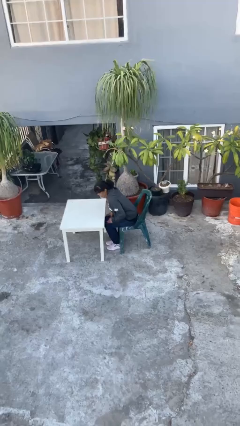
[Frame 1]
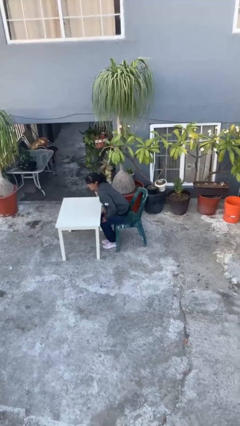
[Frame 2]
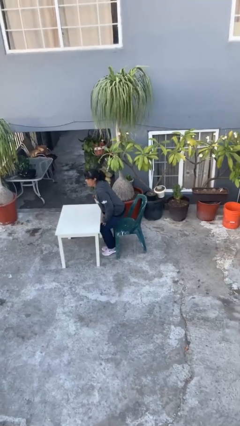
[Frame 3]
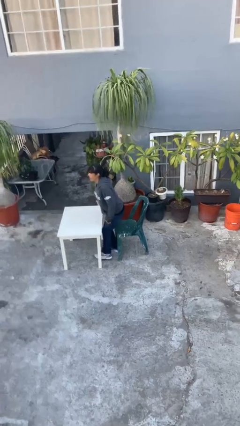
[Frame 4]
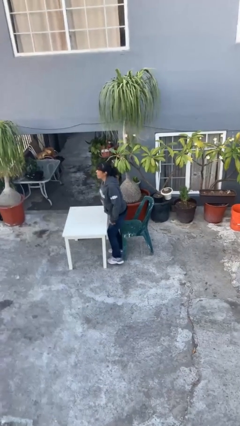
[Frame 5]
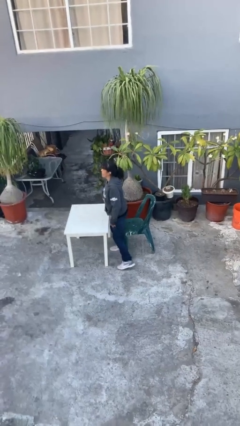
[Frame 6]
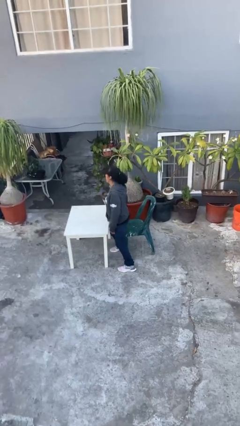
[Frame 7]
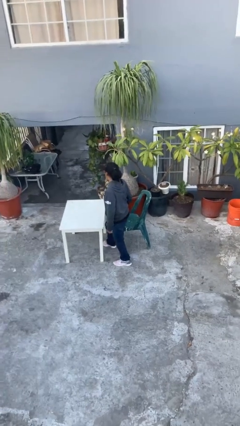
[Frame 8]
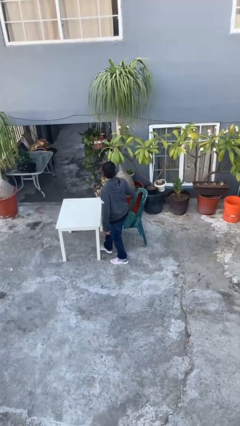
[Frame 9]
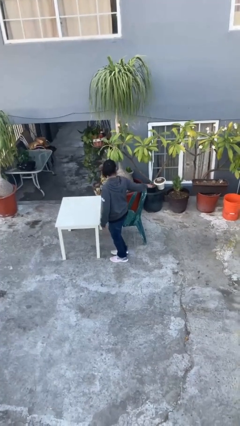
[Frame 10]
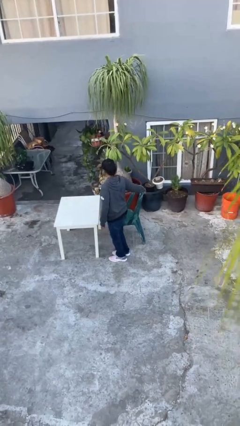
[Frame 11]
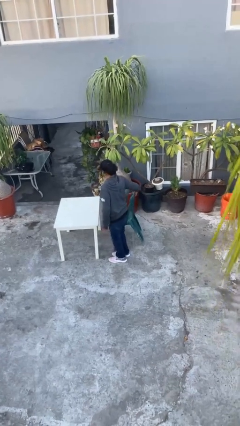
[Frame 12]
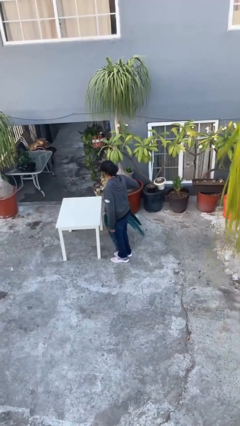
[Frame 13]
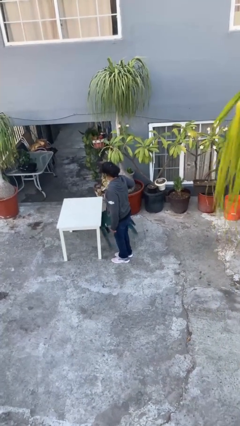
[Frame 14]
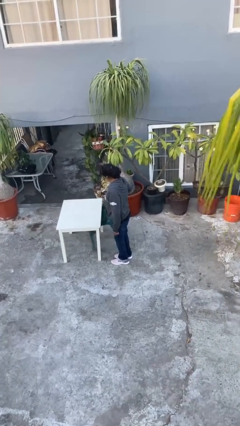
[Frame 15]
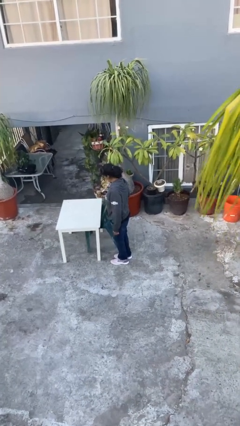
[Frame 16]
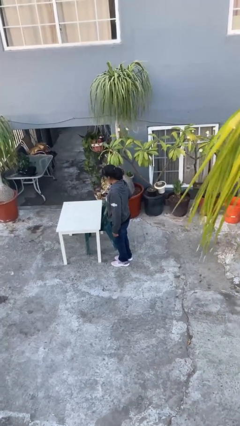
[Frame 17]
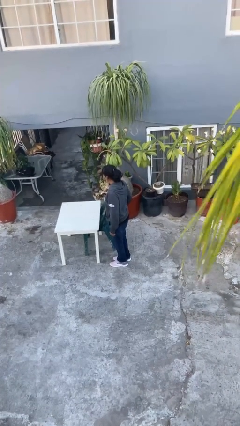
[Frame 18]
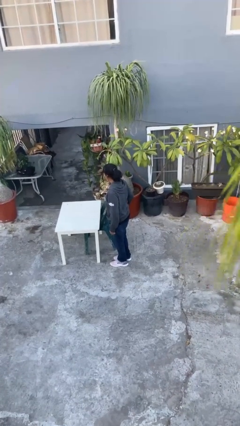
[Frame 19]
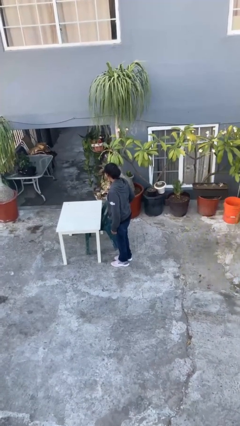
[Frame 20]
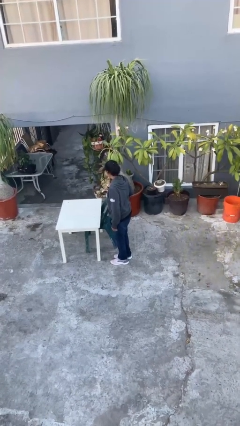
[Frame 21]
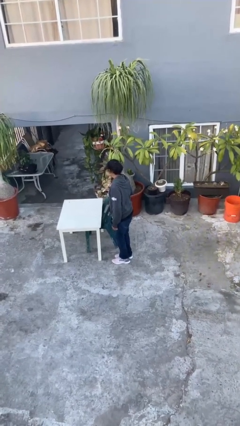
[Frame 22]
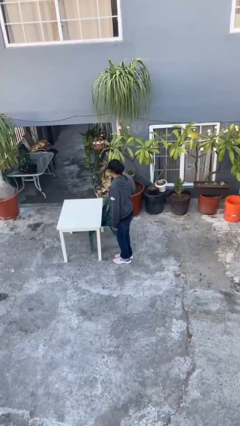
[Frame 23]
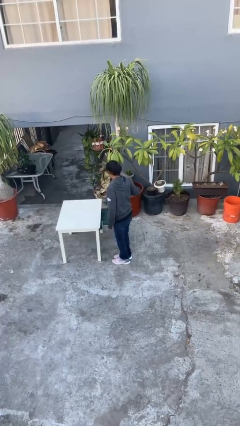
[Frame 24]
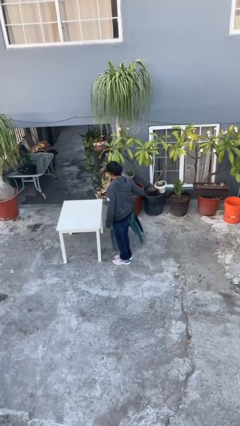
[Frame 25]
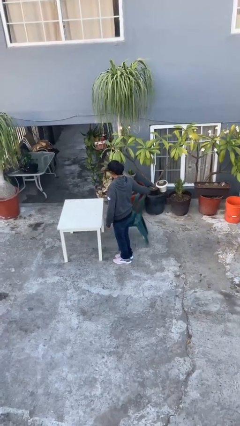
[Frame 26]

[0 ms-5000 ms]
person stands up

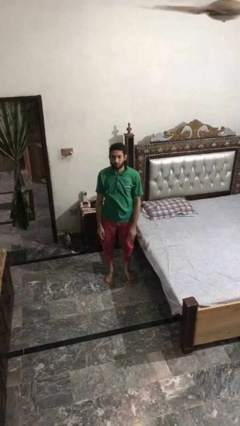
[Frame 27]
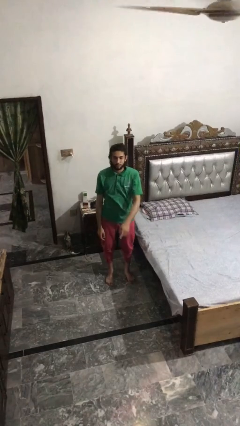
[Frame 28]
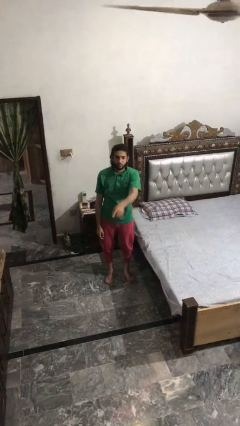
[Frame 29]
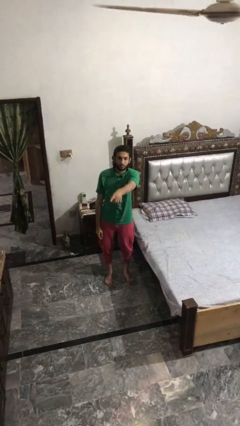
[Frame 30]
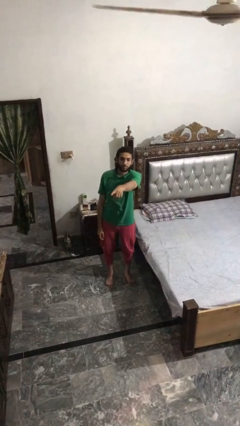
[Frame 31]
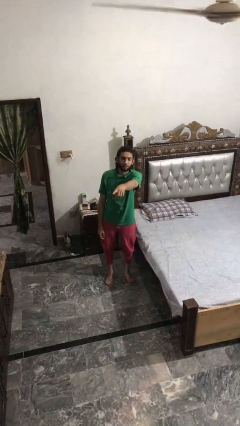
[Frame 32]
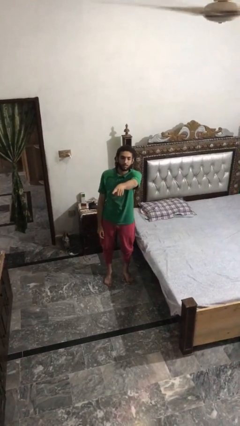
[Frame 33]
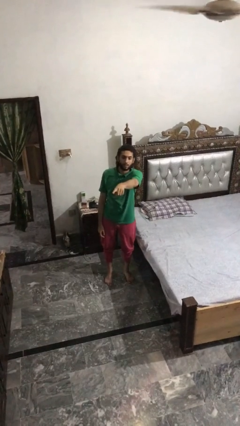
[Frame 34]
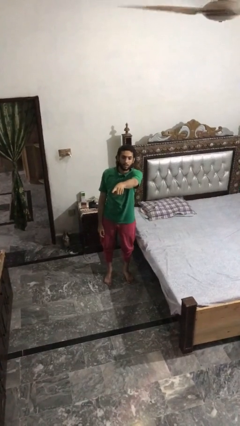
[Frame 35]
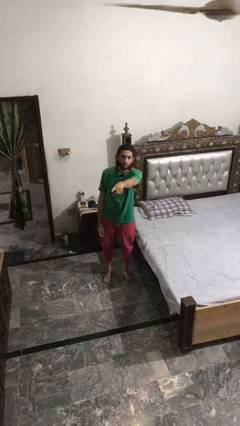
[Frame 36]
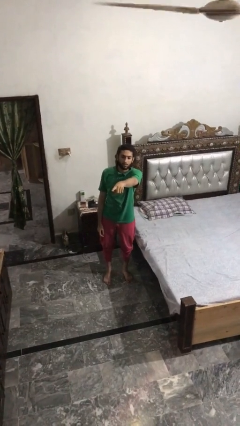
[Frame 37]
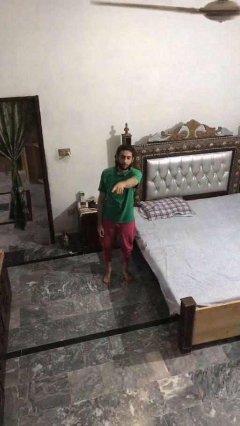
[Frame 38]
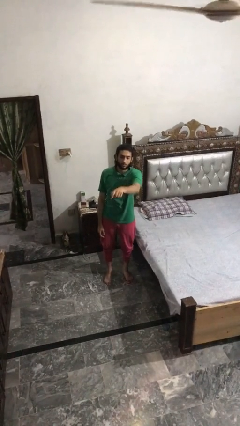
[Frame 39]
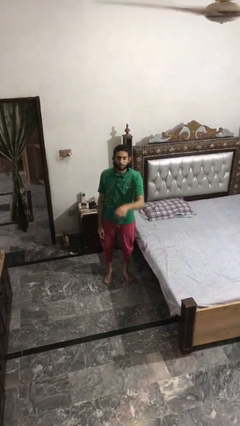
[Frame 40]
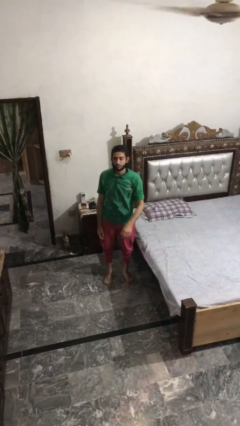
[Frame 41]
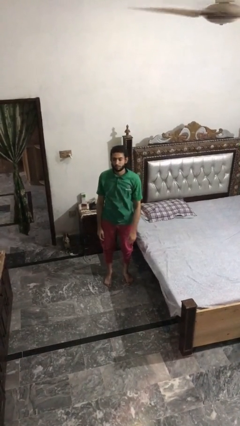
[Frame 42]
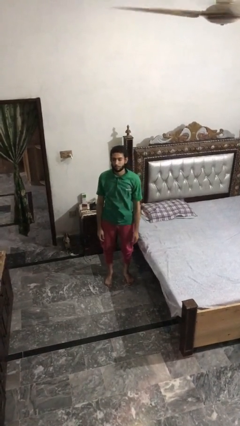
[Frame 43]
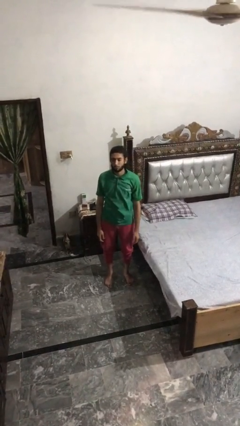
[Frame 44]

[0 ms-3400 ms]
person points at person

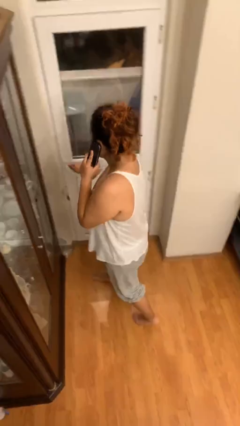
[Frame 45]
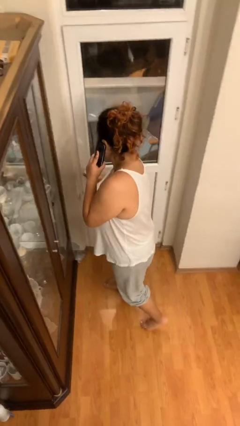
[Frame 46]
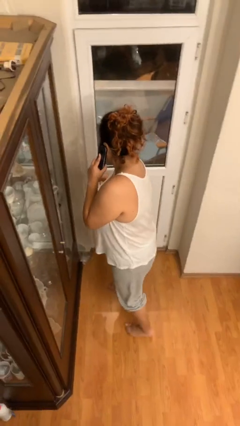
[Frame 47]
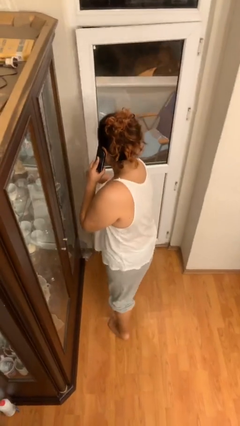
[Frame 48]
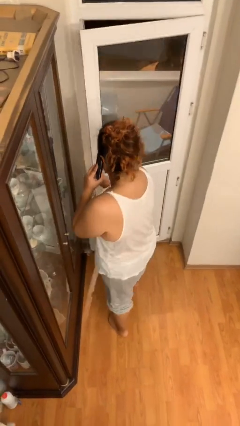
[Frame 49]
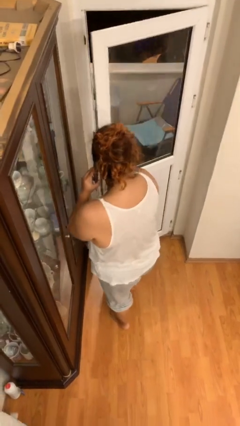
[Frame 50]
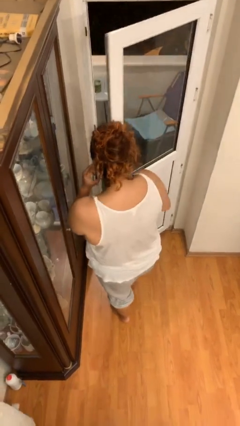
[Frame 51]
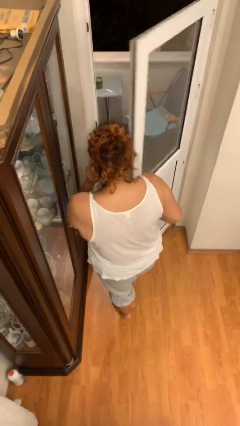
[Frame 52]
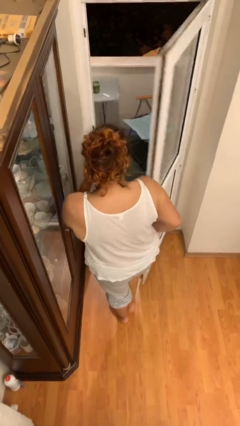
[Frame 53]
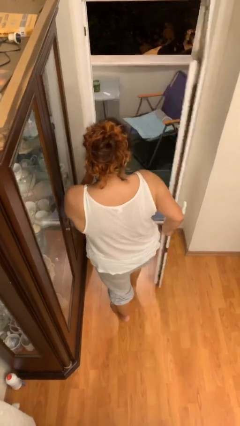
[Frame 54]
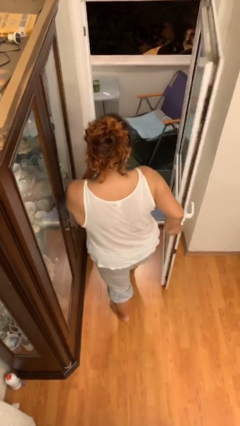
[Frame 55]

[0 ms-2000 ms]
person opens facility door

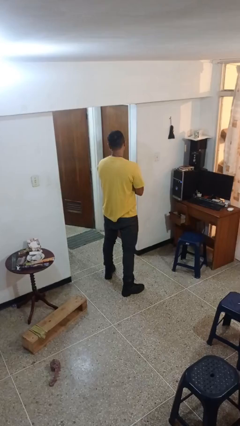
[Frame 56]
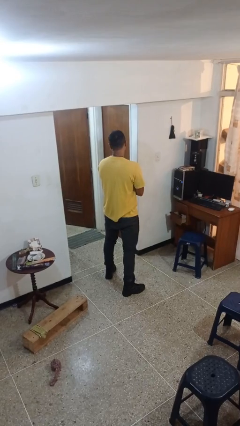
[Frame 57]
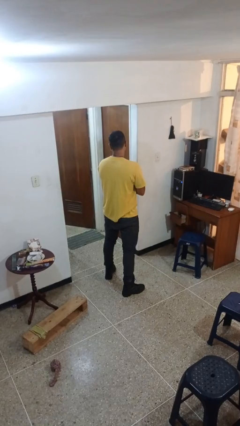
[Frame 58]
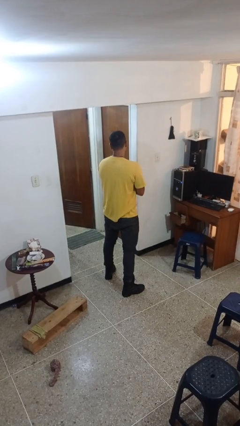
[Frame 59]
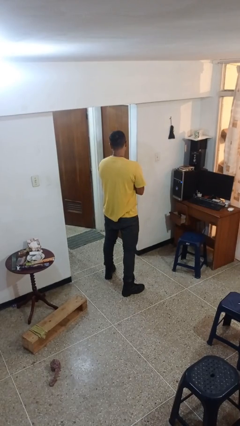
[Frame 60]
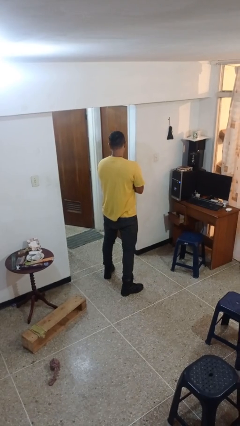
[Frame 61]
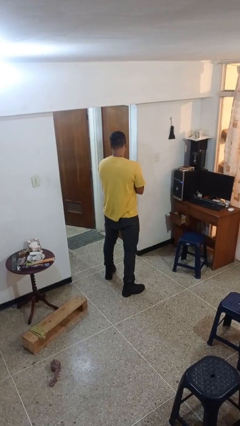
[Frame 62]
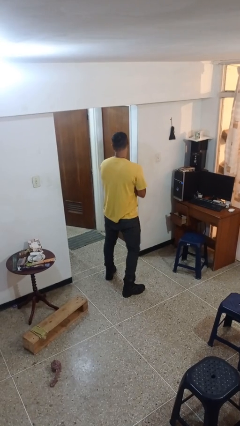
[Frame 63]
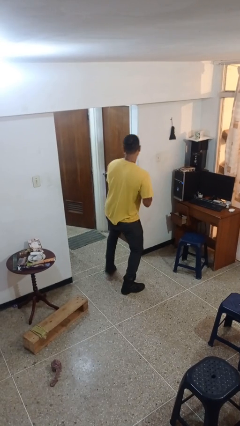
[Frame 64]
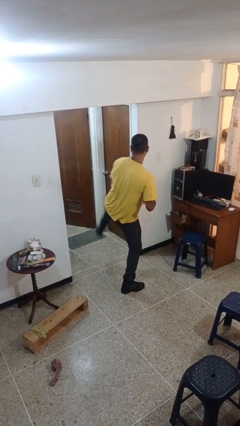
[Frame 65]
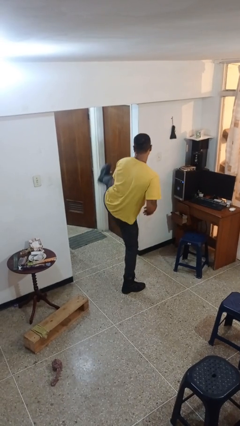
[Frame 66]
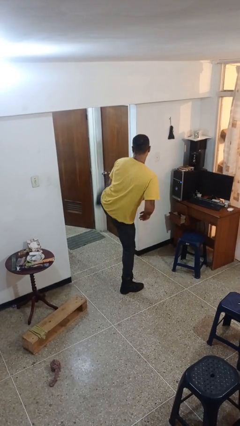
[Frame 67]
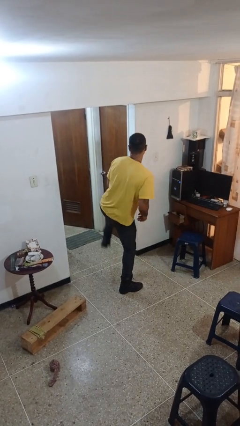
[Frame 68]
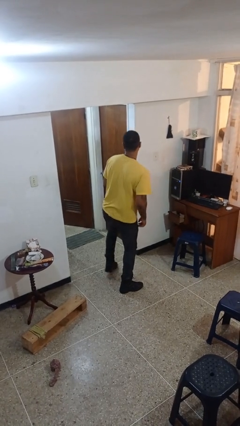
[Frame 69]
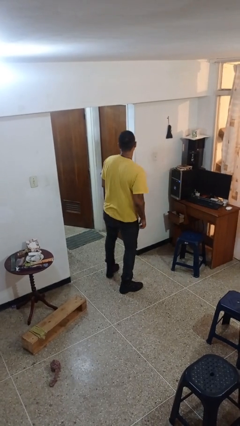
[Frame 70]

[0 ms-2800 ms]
person karate kicks

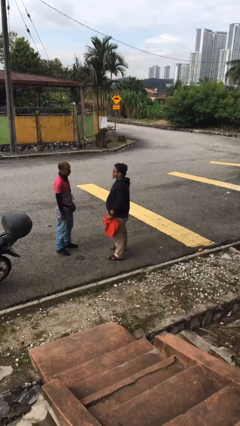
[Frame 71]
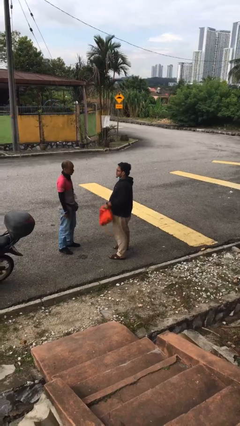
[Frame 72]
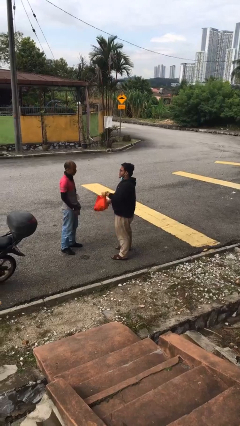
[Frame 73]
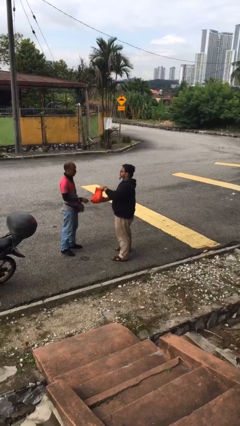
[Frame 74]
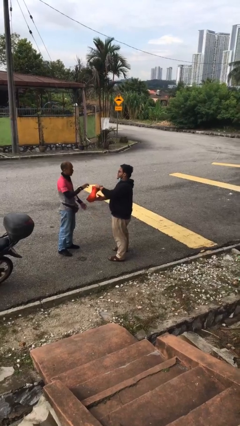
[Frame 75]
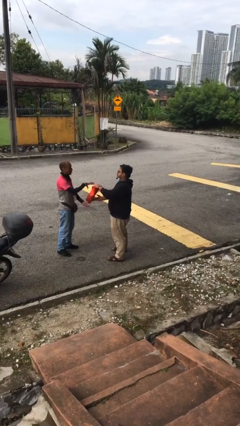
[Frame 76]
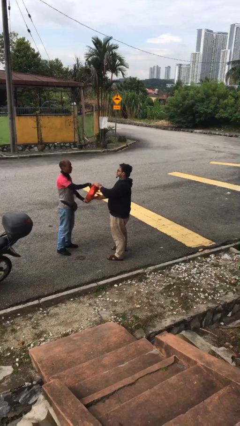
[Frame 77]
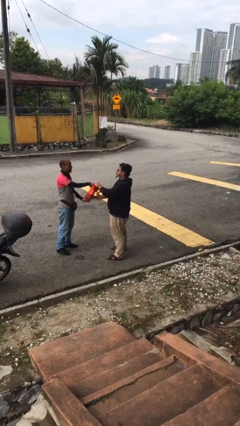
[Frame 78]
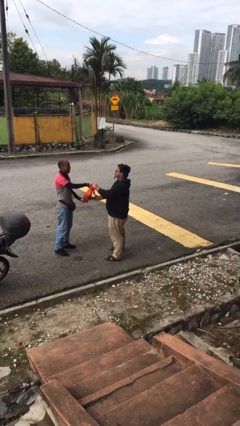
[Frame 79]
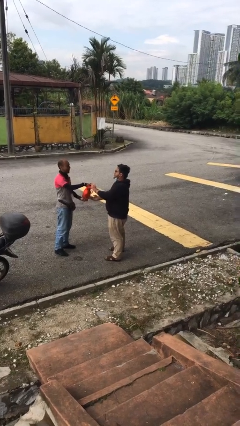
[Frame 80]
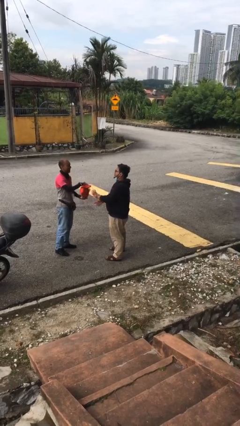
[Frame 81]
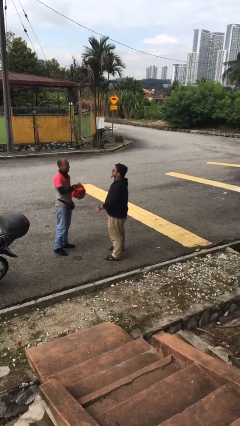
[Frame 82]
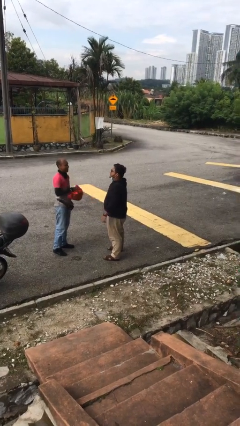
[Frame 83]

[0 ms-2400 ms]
person transfers object to person

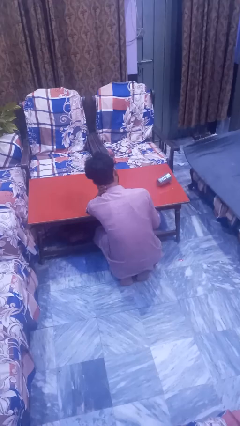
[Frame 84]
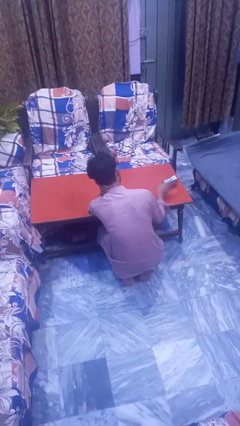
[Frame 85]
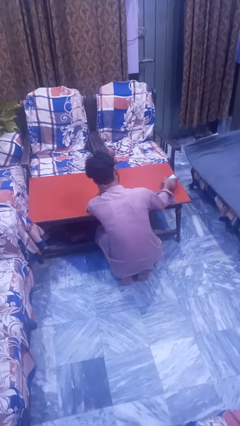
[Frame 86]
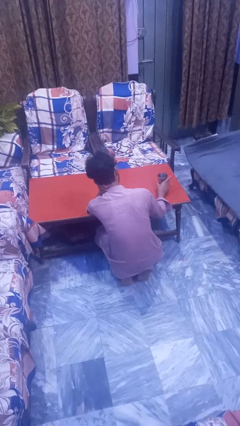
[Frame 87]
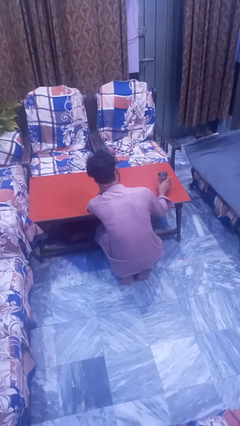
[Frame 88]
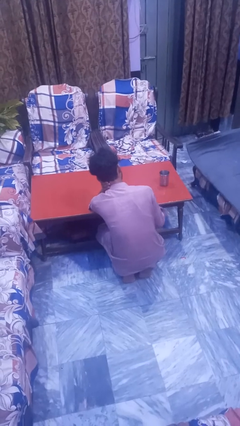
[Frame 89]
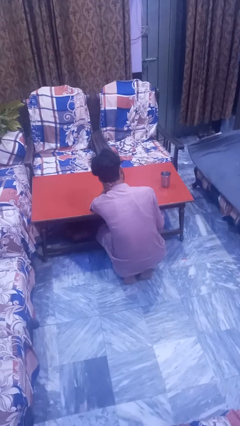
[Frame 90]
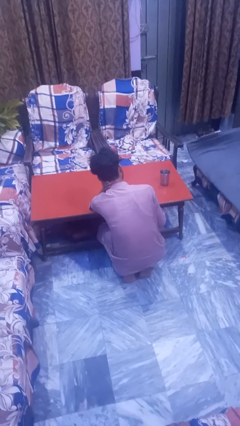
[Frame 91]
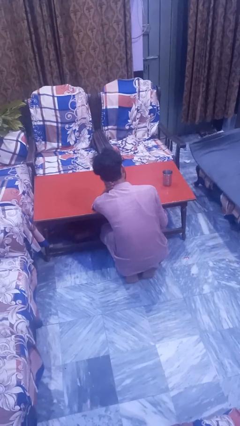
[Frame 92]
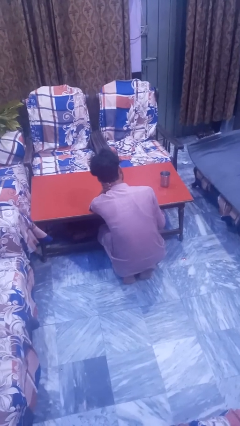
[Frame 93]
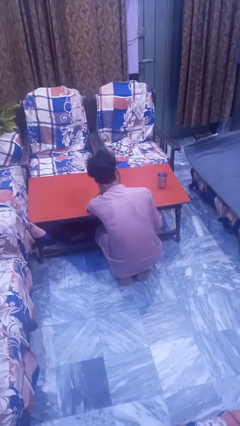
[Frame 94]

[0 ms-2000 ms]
person sets upright glass

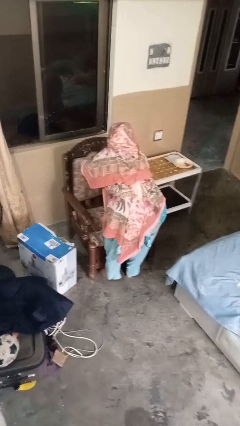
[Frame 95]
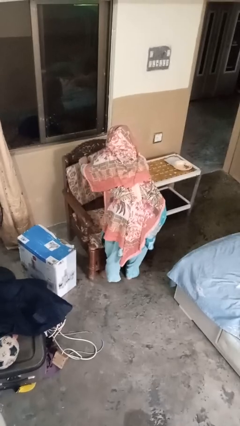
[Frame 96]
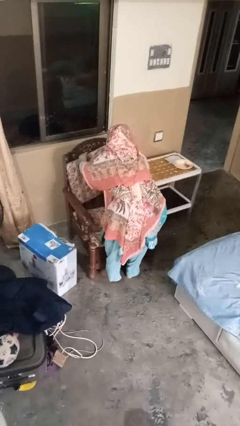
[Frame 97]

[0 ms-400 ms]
person searches in couch
